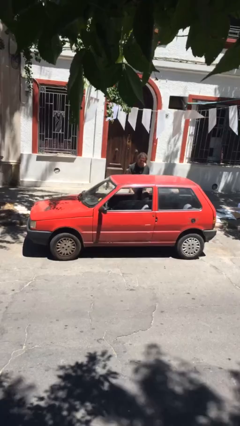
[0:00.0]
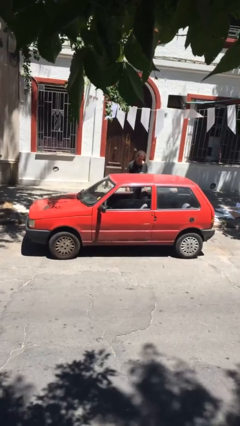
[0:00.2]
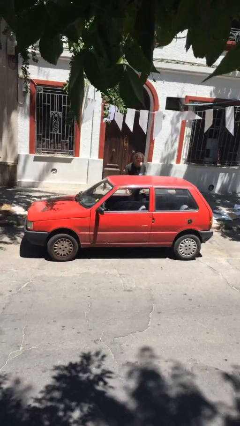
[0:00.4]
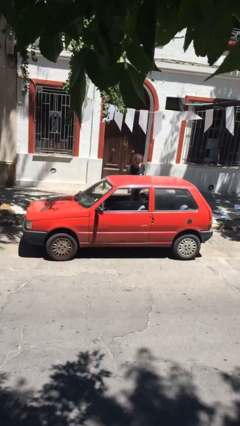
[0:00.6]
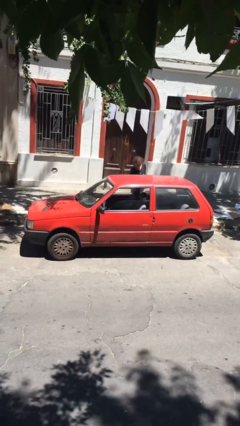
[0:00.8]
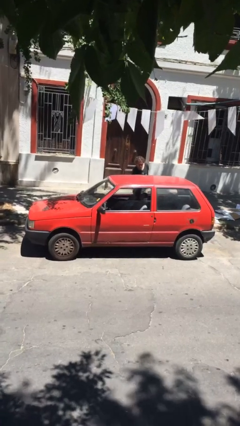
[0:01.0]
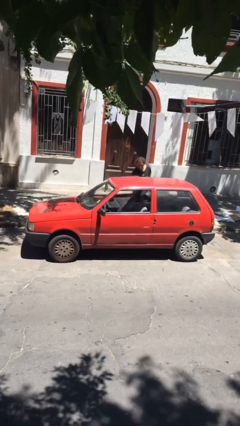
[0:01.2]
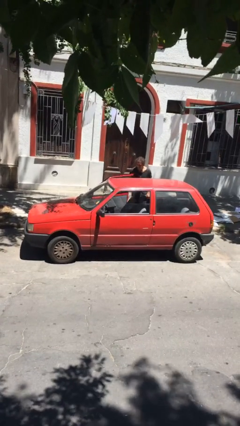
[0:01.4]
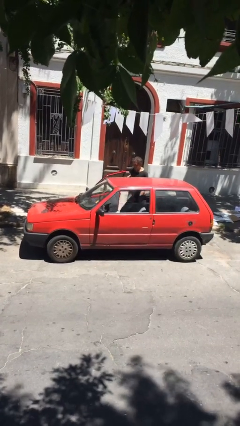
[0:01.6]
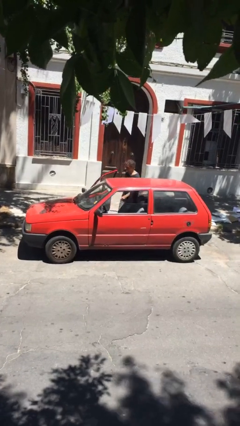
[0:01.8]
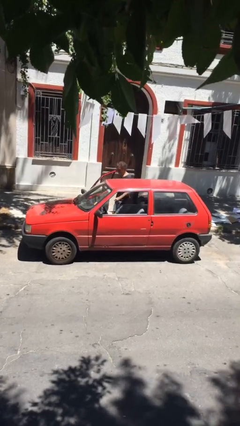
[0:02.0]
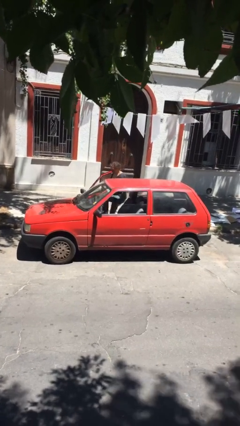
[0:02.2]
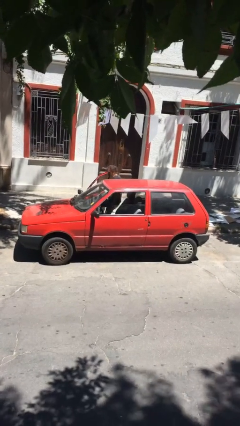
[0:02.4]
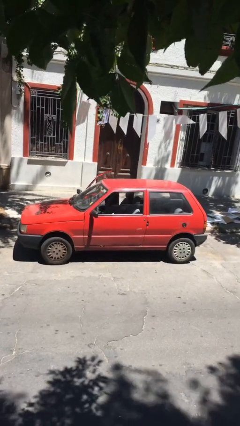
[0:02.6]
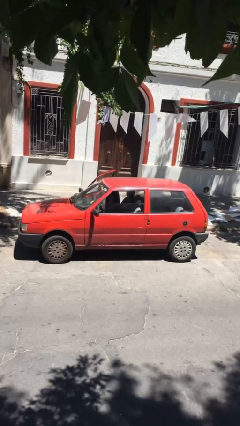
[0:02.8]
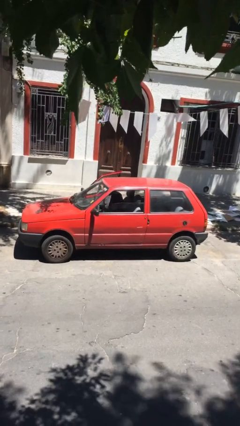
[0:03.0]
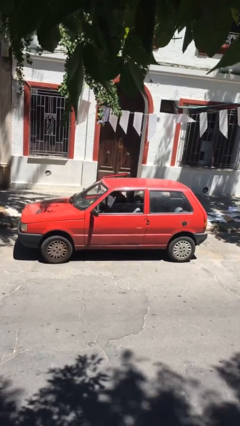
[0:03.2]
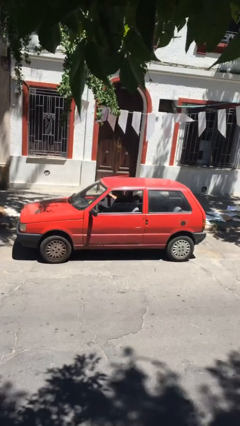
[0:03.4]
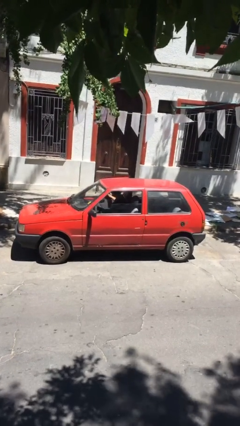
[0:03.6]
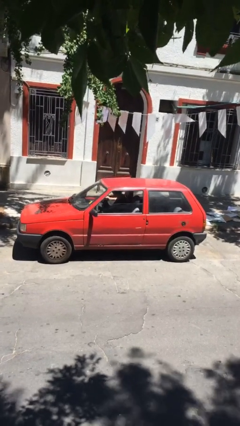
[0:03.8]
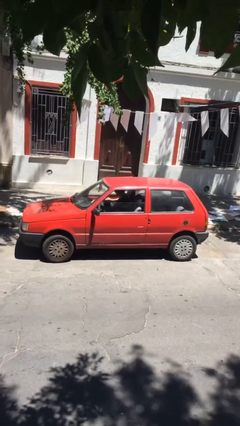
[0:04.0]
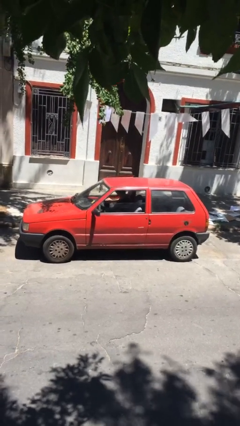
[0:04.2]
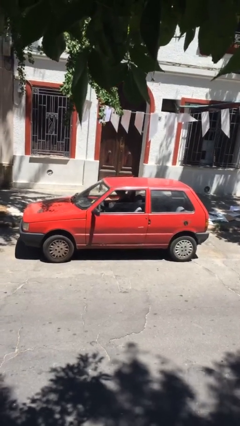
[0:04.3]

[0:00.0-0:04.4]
car picks up person

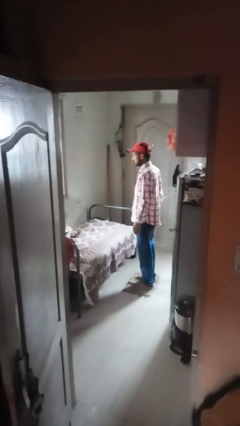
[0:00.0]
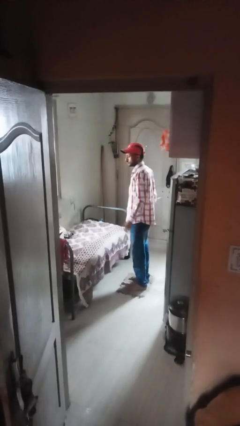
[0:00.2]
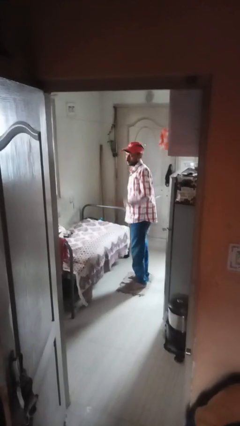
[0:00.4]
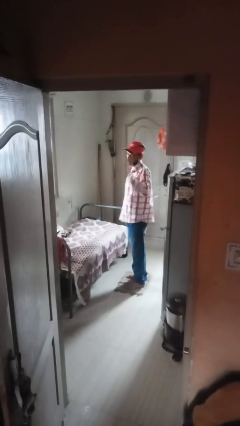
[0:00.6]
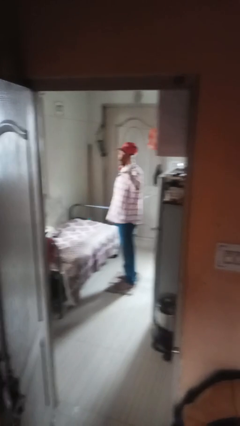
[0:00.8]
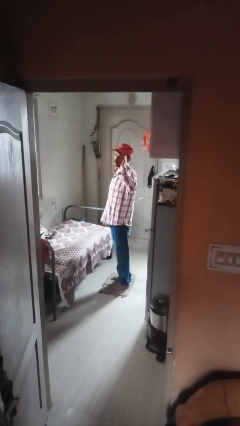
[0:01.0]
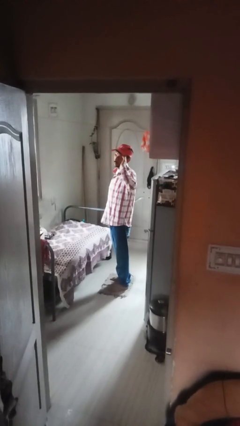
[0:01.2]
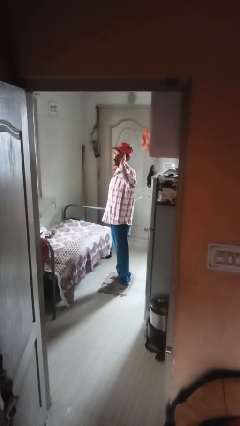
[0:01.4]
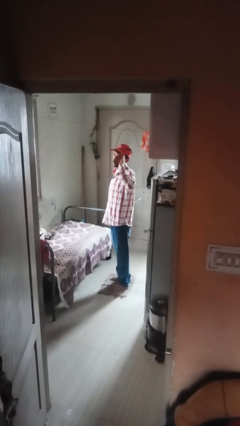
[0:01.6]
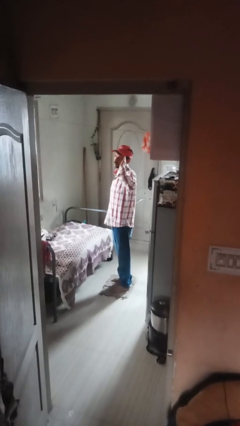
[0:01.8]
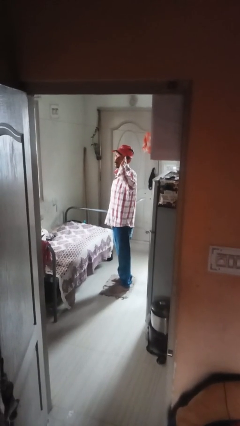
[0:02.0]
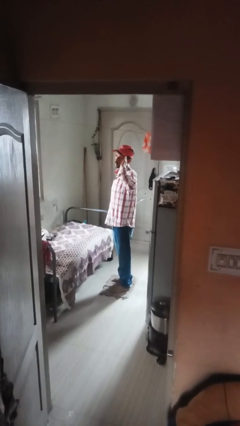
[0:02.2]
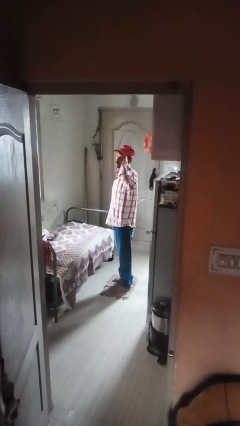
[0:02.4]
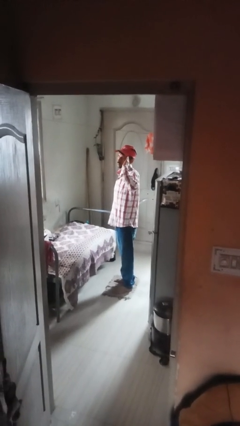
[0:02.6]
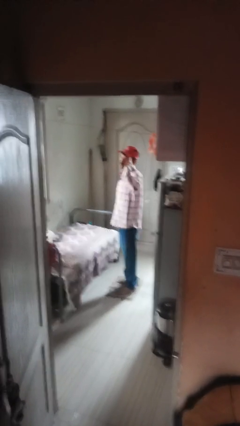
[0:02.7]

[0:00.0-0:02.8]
person salutes

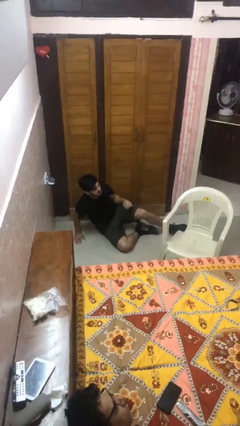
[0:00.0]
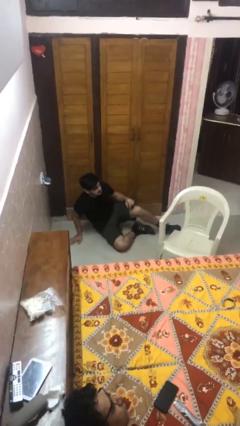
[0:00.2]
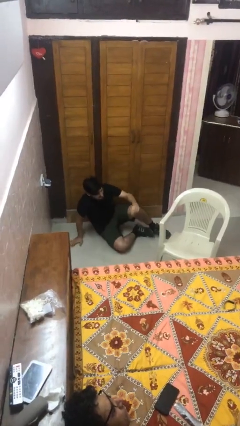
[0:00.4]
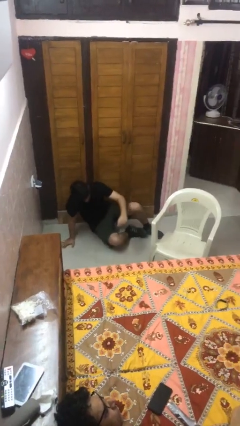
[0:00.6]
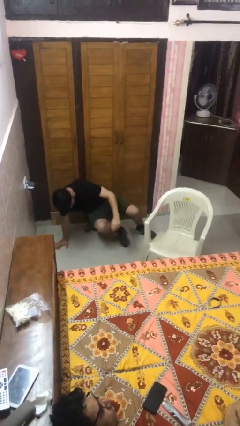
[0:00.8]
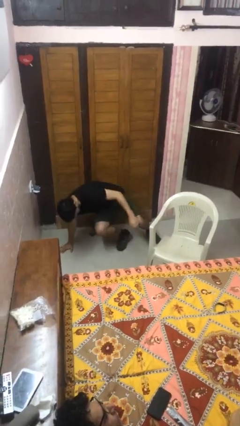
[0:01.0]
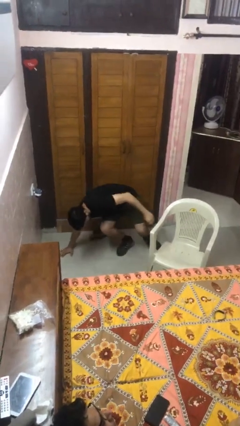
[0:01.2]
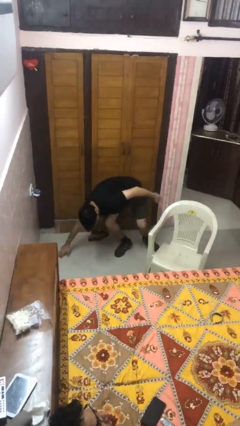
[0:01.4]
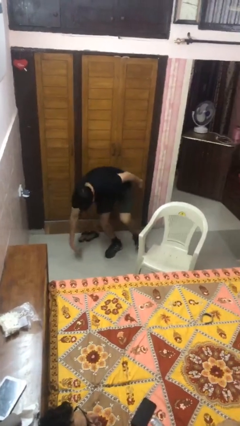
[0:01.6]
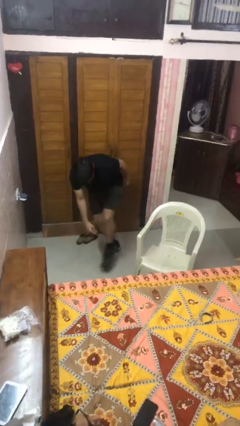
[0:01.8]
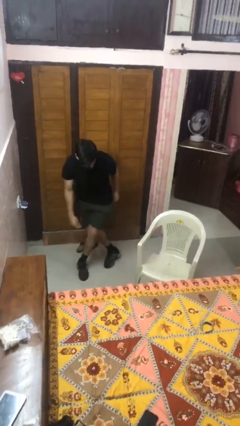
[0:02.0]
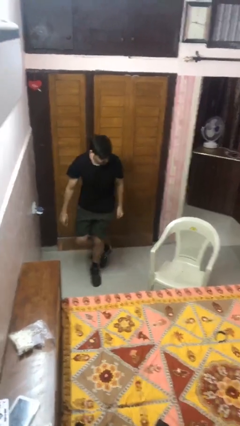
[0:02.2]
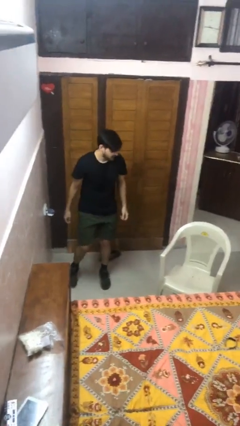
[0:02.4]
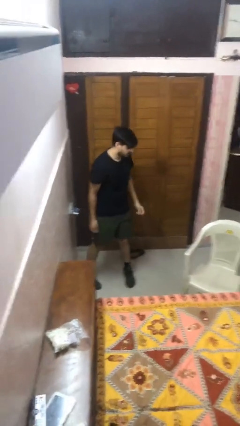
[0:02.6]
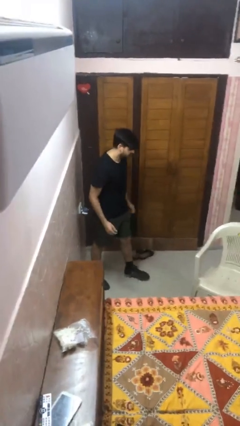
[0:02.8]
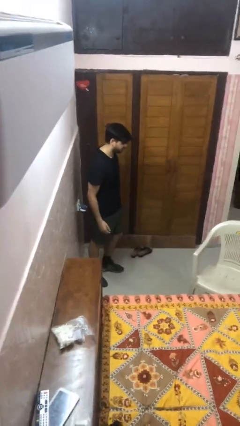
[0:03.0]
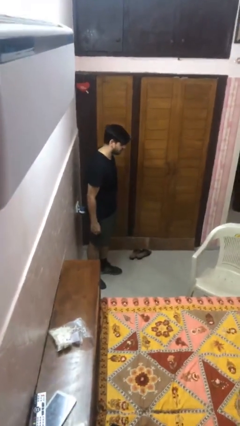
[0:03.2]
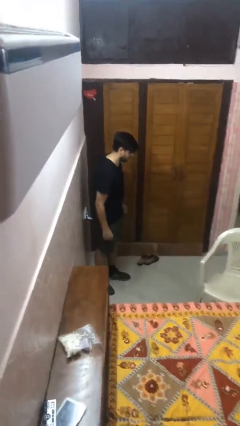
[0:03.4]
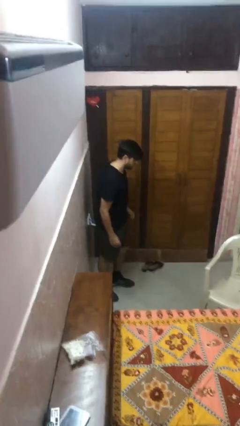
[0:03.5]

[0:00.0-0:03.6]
person stands up from floor

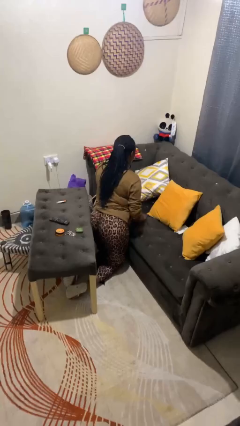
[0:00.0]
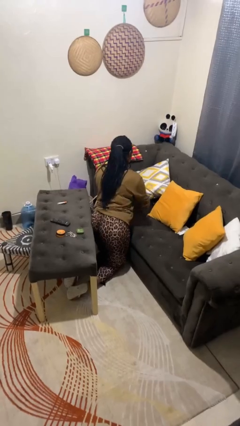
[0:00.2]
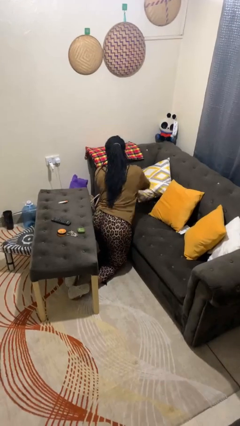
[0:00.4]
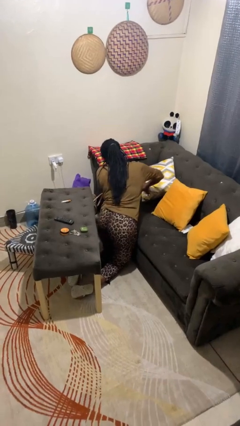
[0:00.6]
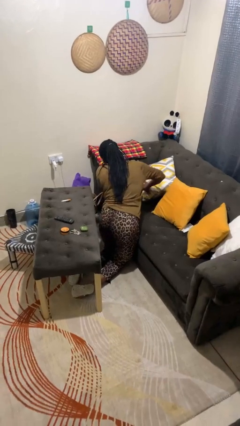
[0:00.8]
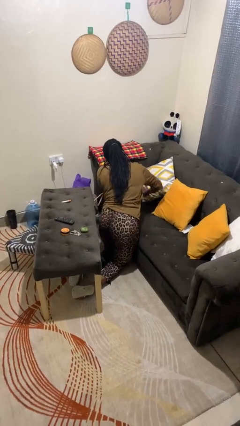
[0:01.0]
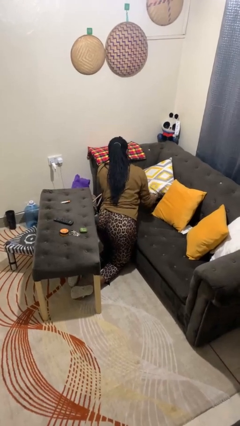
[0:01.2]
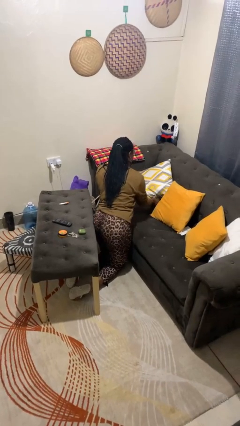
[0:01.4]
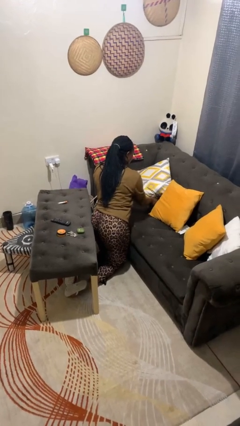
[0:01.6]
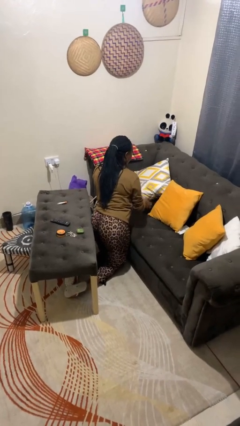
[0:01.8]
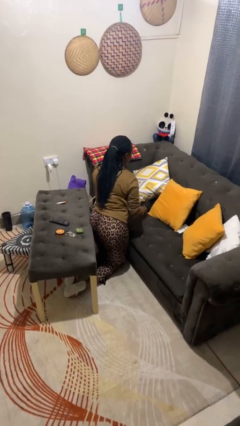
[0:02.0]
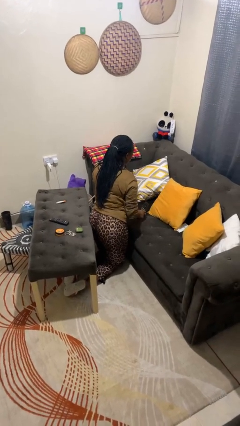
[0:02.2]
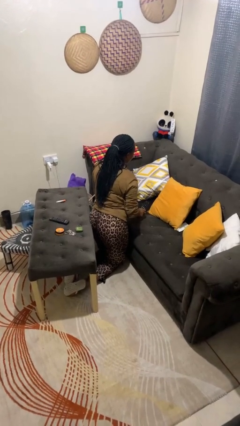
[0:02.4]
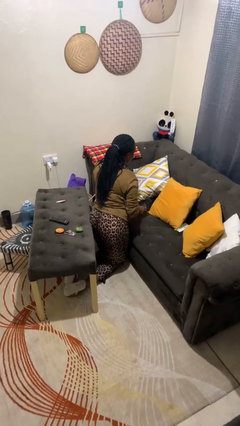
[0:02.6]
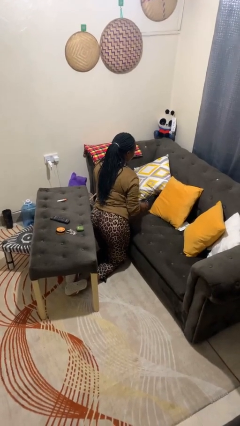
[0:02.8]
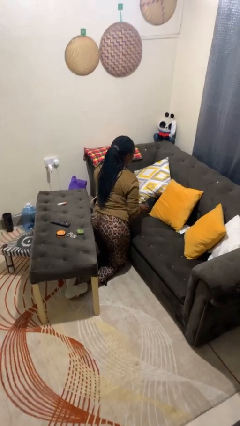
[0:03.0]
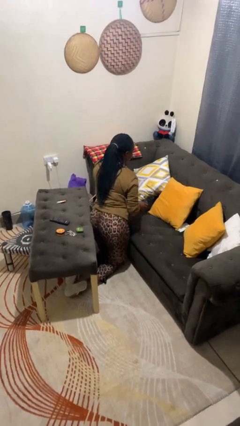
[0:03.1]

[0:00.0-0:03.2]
person searches in couch

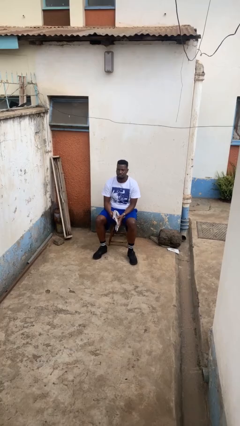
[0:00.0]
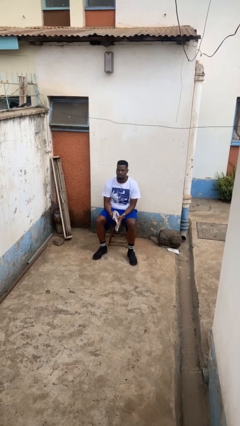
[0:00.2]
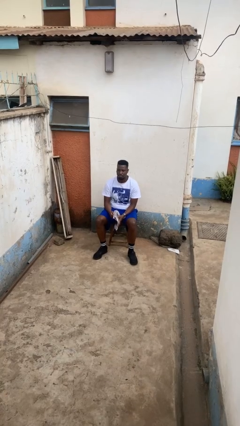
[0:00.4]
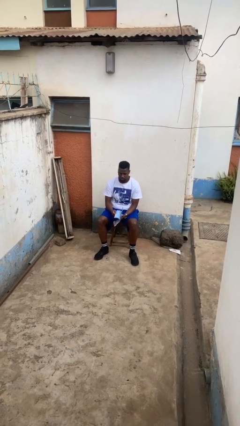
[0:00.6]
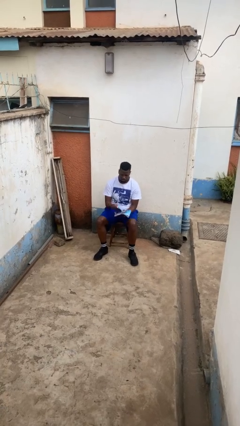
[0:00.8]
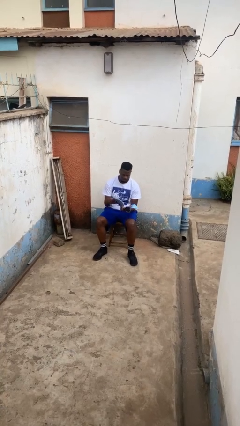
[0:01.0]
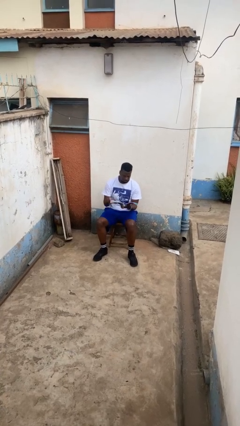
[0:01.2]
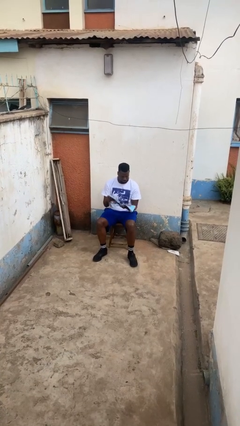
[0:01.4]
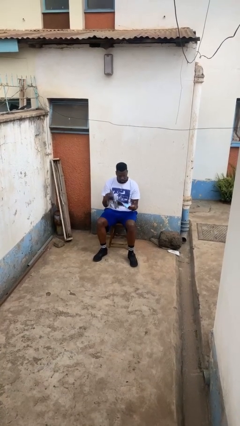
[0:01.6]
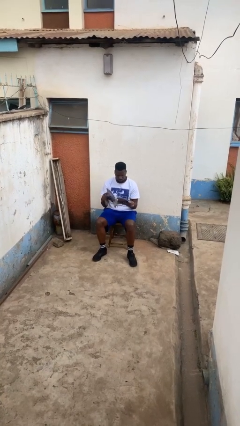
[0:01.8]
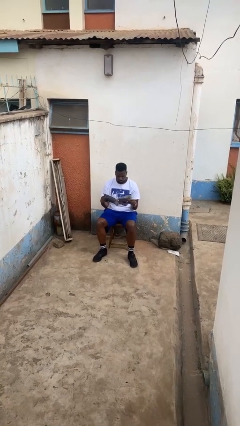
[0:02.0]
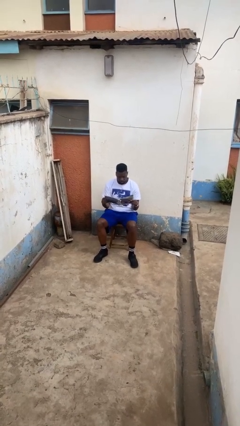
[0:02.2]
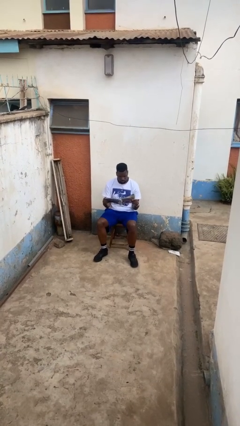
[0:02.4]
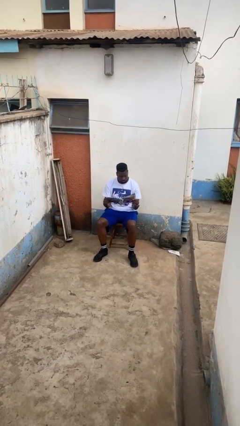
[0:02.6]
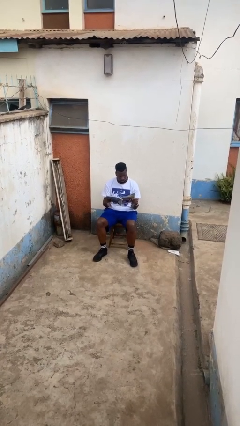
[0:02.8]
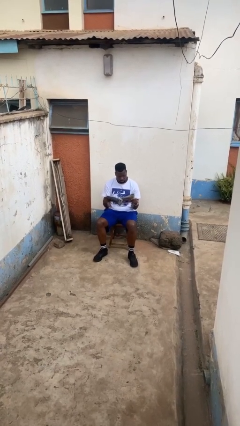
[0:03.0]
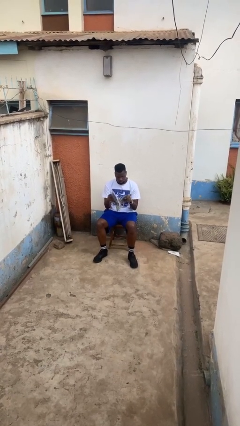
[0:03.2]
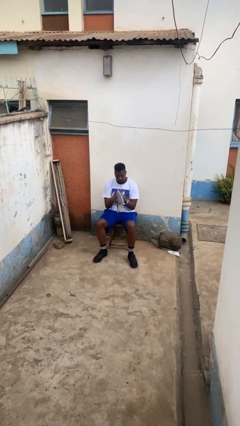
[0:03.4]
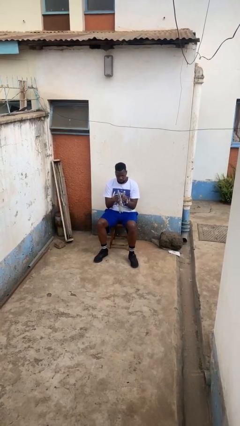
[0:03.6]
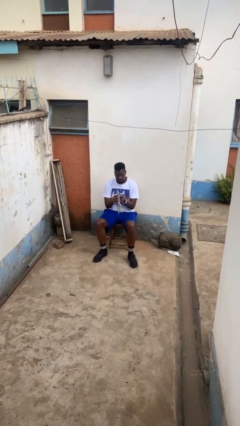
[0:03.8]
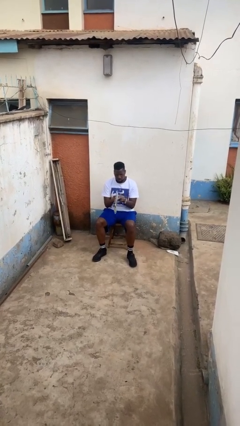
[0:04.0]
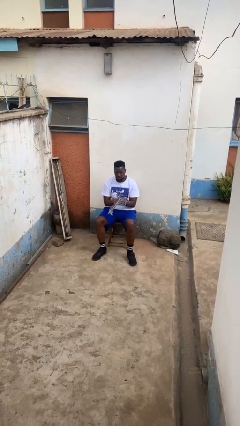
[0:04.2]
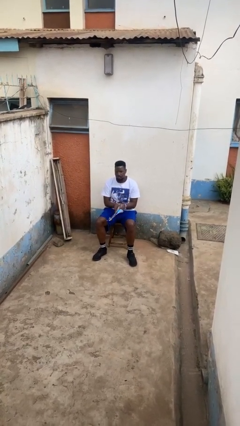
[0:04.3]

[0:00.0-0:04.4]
person reads magazine
